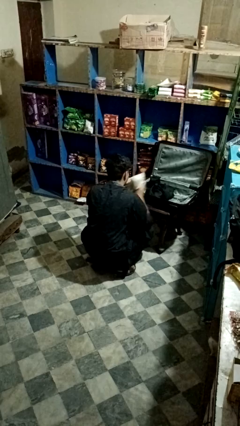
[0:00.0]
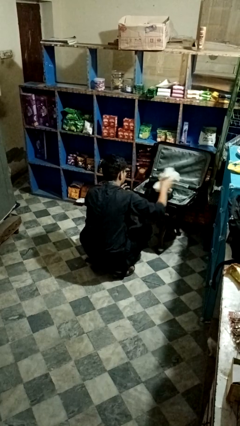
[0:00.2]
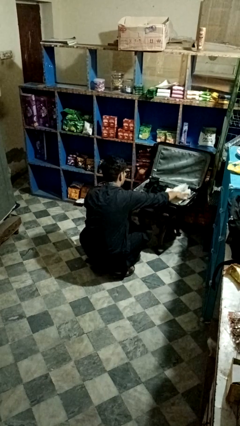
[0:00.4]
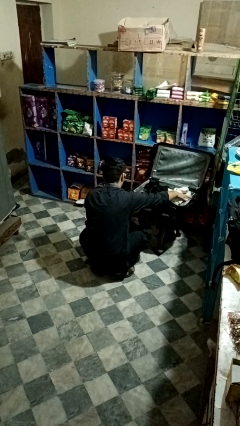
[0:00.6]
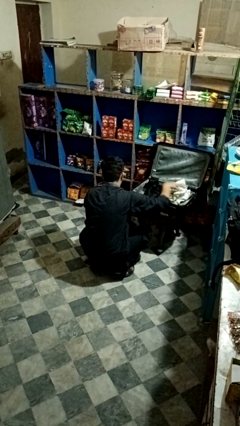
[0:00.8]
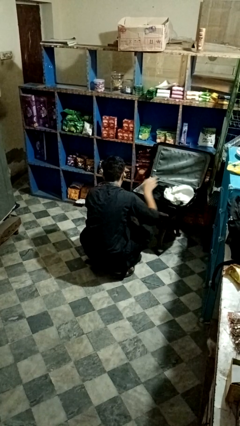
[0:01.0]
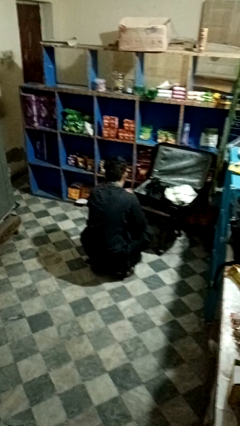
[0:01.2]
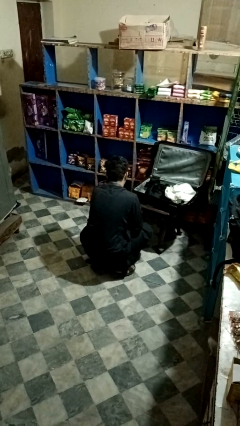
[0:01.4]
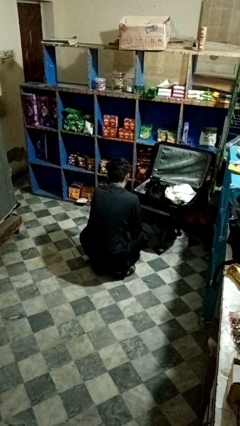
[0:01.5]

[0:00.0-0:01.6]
person loads clothes into suitcase

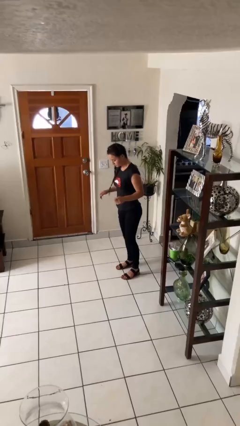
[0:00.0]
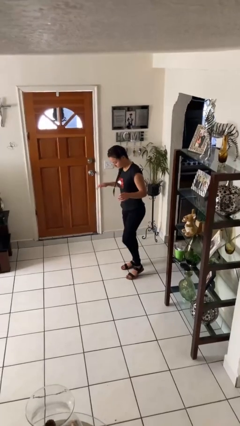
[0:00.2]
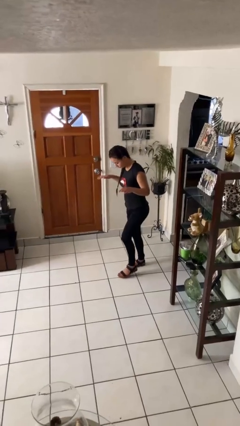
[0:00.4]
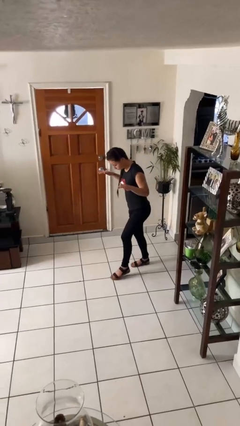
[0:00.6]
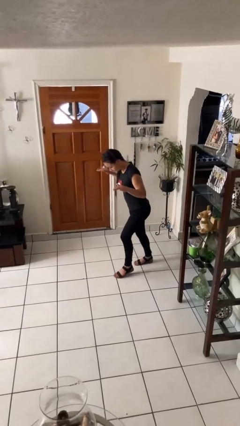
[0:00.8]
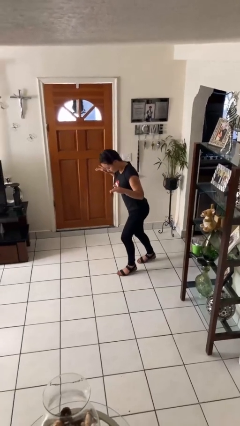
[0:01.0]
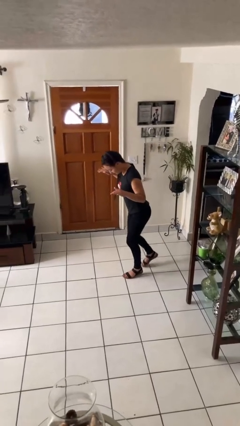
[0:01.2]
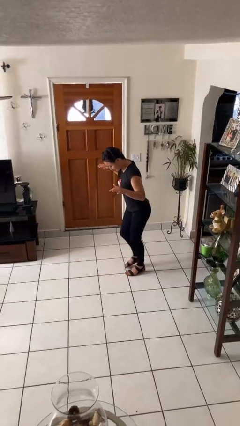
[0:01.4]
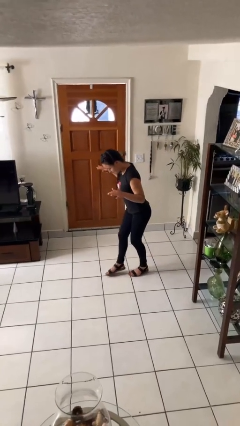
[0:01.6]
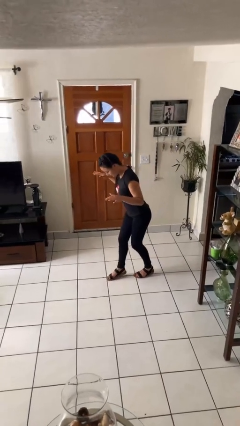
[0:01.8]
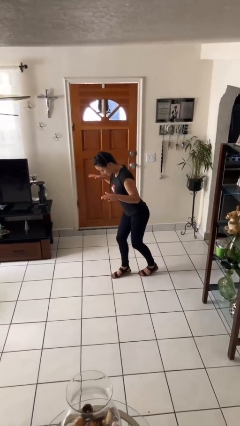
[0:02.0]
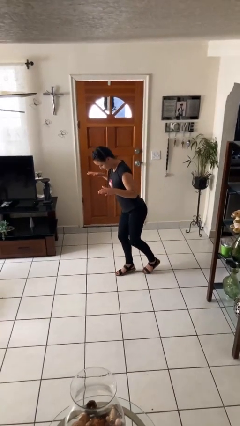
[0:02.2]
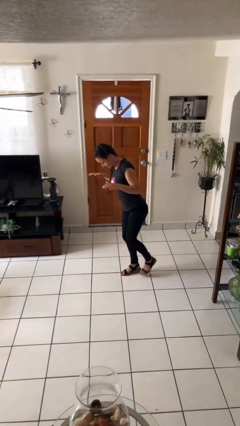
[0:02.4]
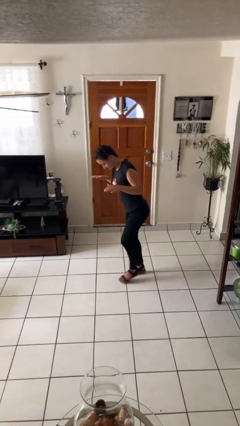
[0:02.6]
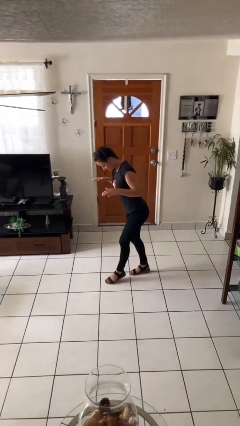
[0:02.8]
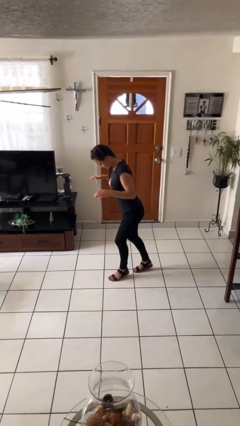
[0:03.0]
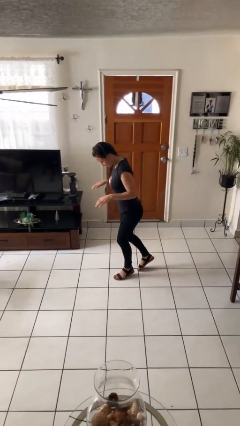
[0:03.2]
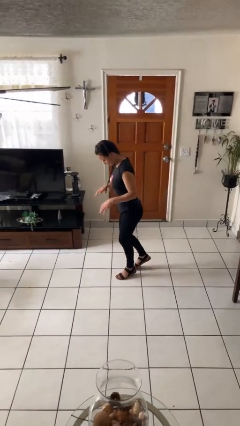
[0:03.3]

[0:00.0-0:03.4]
person walks tiptoe

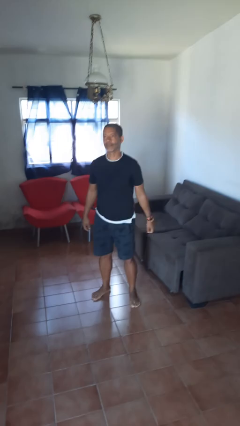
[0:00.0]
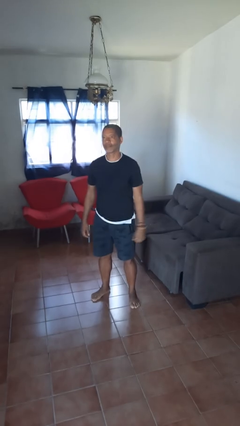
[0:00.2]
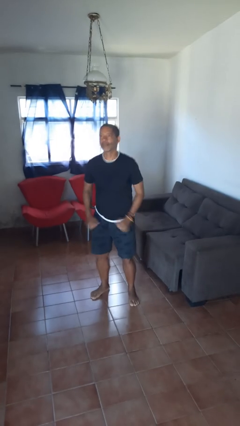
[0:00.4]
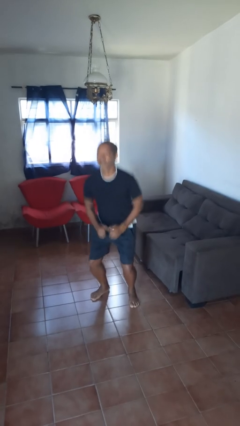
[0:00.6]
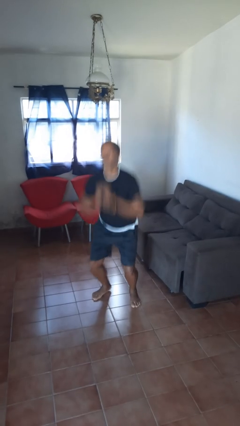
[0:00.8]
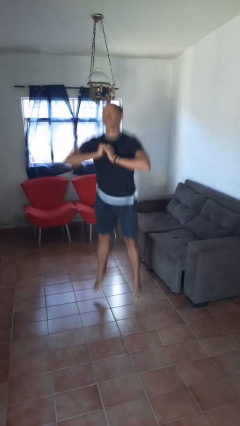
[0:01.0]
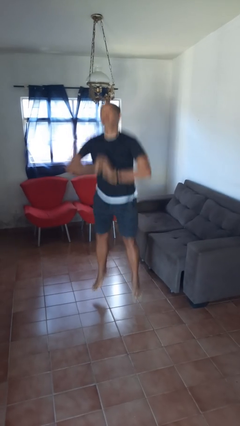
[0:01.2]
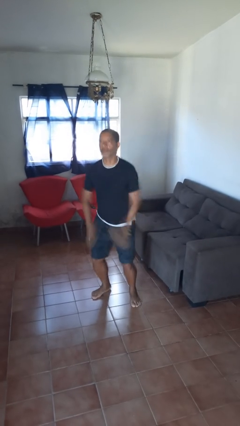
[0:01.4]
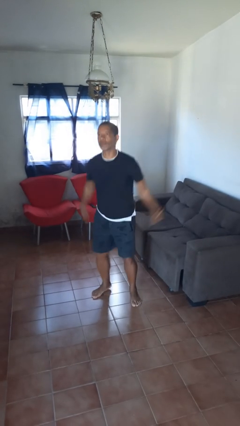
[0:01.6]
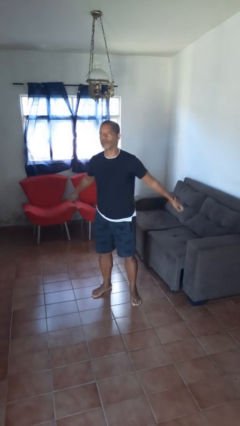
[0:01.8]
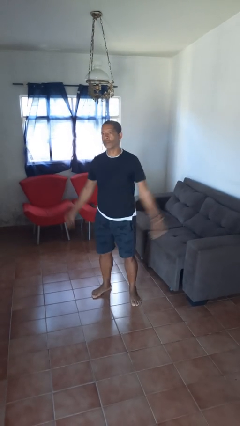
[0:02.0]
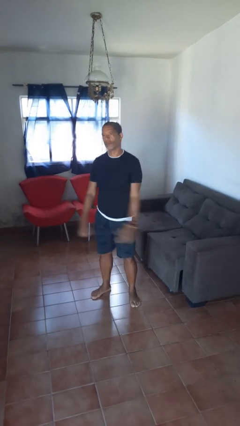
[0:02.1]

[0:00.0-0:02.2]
person jumps

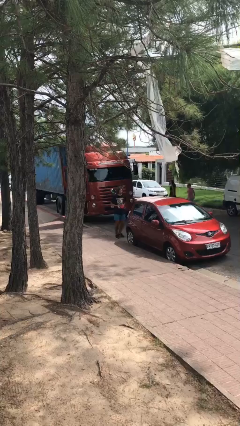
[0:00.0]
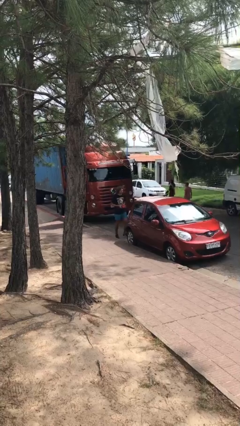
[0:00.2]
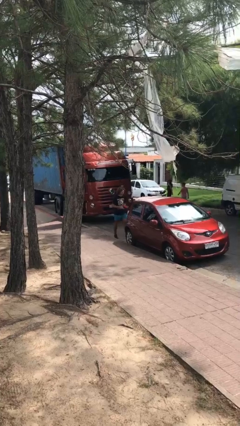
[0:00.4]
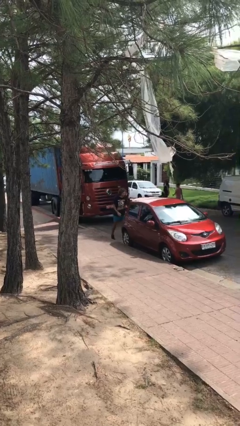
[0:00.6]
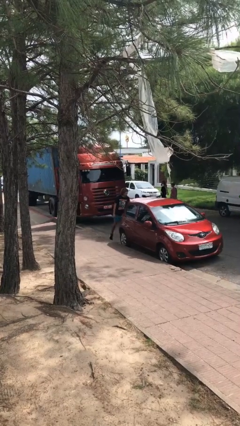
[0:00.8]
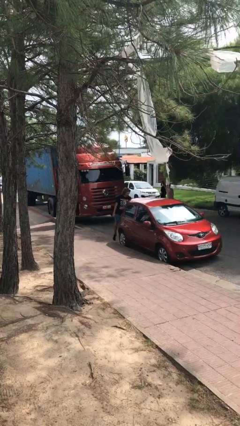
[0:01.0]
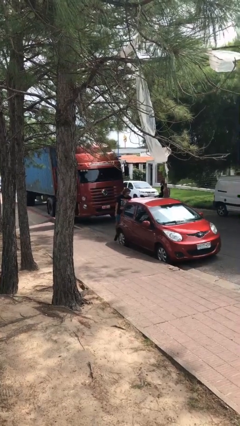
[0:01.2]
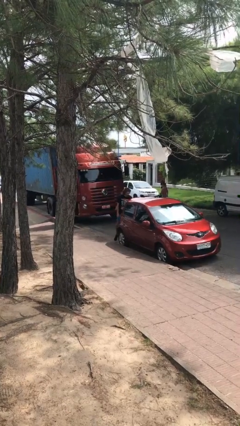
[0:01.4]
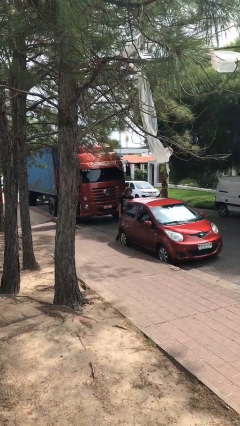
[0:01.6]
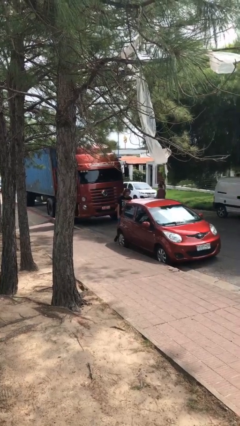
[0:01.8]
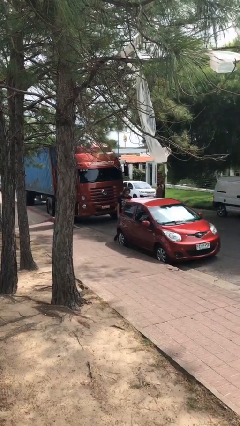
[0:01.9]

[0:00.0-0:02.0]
person loads car

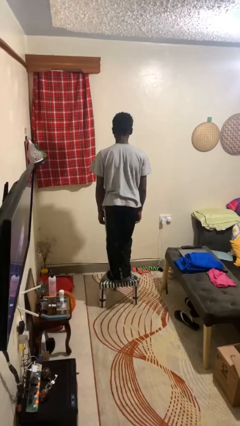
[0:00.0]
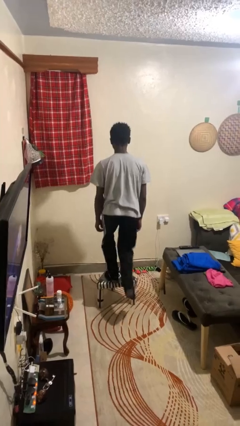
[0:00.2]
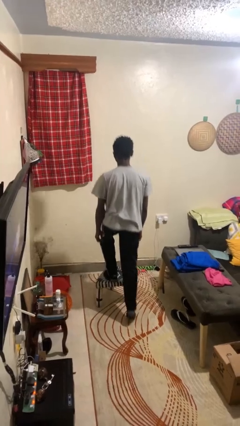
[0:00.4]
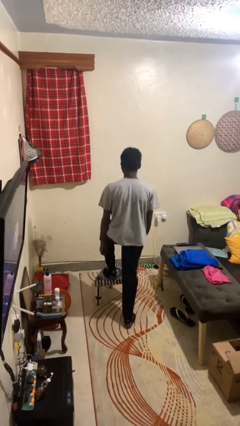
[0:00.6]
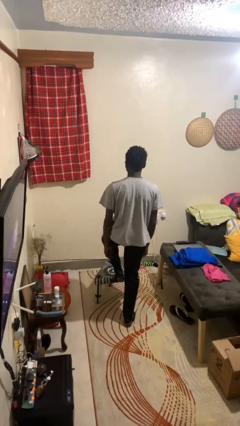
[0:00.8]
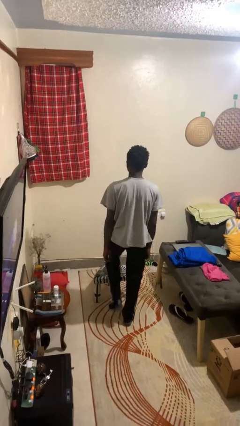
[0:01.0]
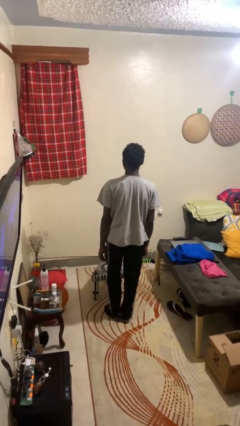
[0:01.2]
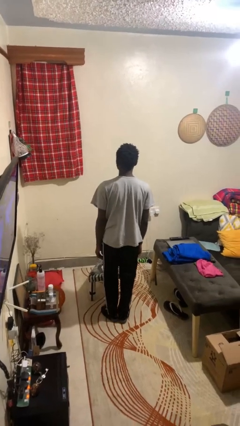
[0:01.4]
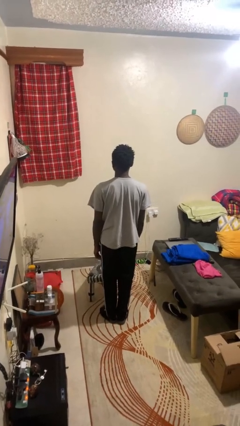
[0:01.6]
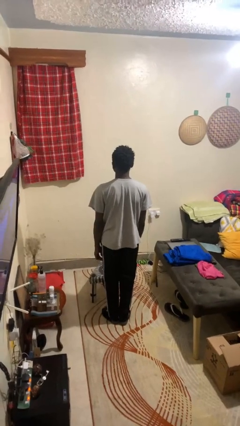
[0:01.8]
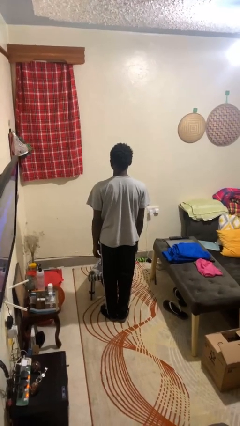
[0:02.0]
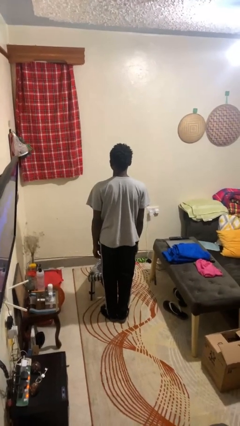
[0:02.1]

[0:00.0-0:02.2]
person climbs off chair

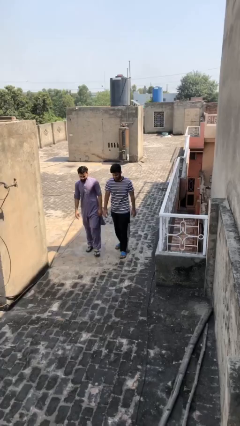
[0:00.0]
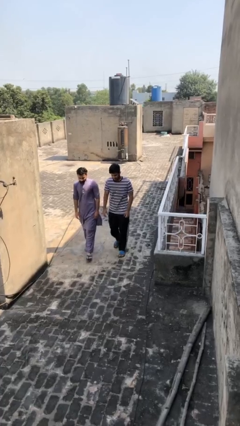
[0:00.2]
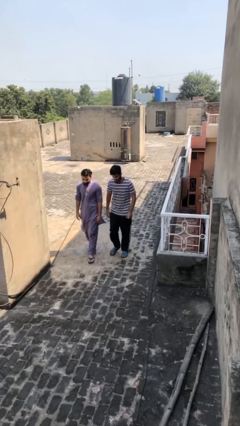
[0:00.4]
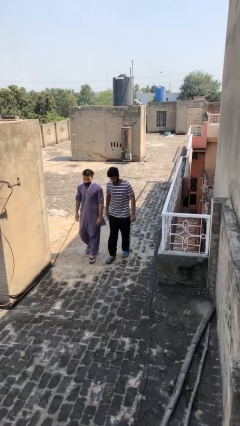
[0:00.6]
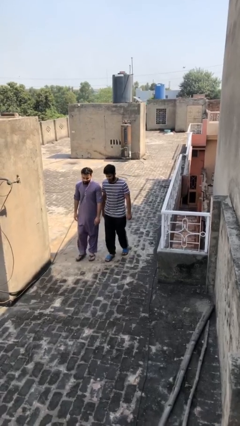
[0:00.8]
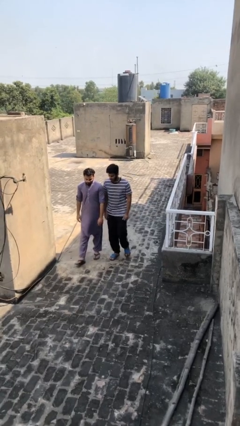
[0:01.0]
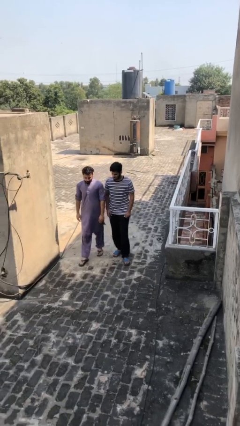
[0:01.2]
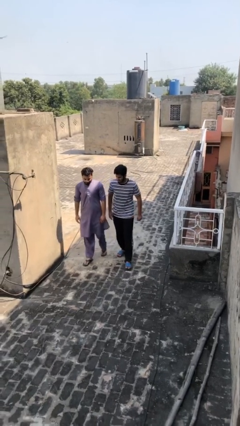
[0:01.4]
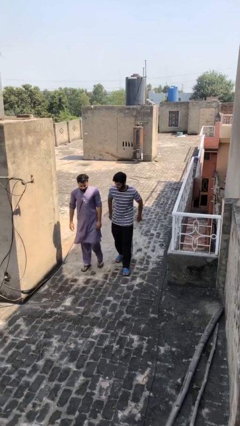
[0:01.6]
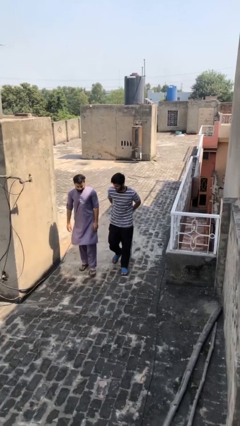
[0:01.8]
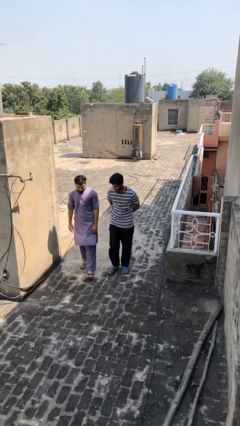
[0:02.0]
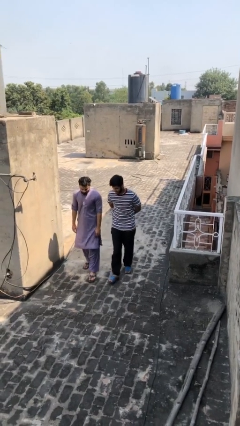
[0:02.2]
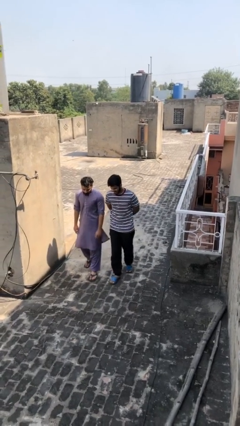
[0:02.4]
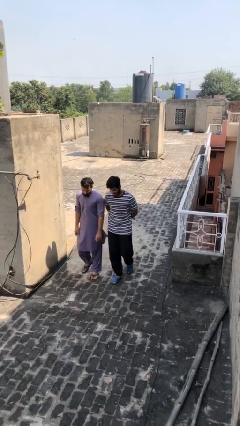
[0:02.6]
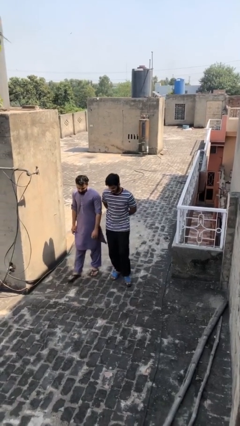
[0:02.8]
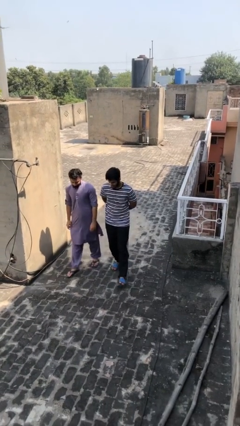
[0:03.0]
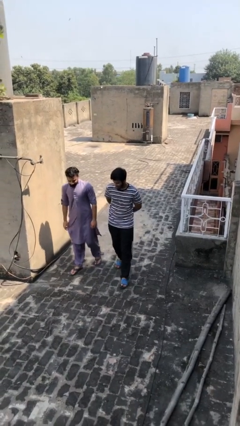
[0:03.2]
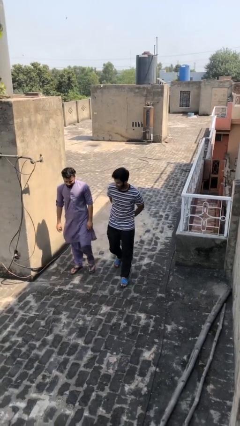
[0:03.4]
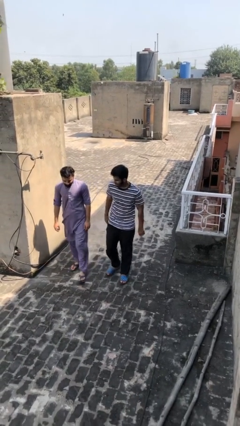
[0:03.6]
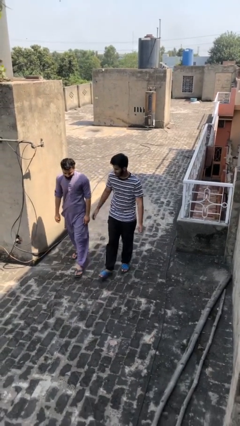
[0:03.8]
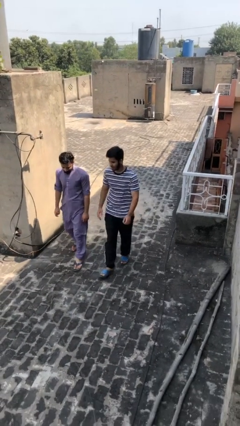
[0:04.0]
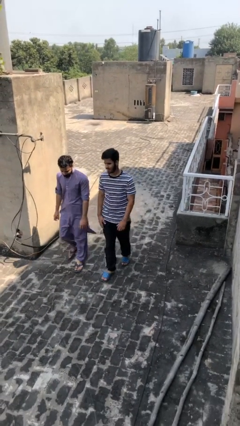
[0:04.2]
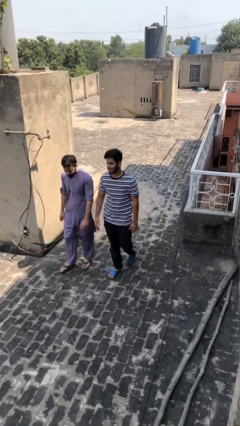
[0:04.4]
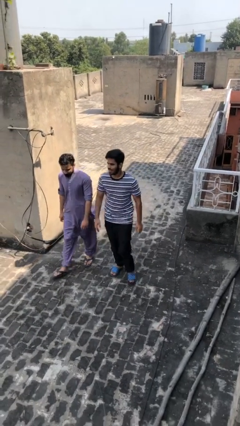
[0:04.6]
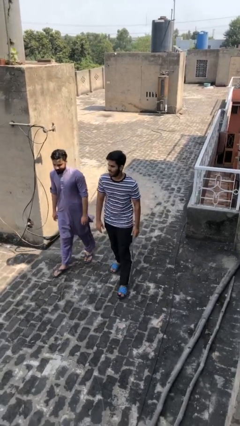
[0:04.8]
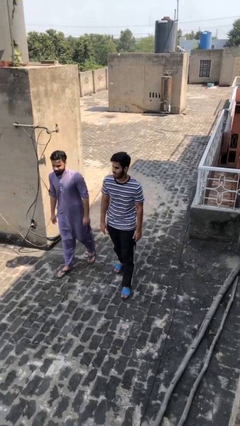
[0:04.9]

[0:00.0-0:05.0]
person talks to person

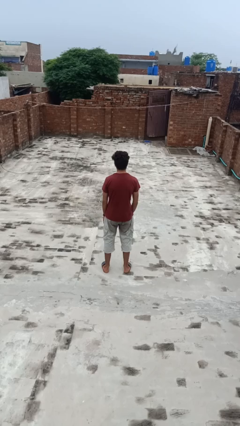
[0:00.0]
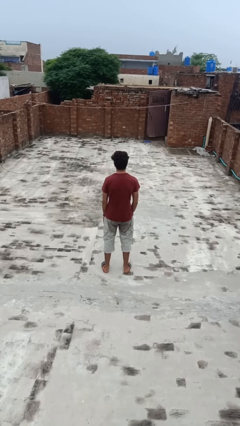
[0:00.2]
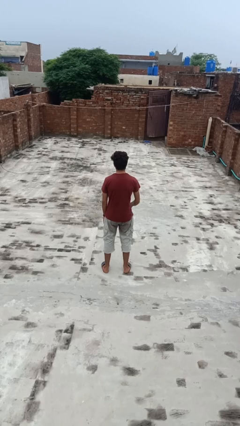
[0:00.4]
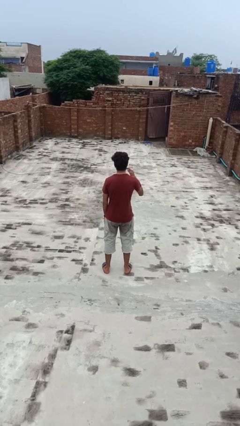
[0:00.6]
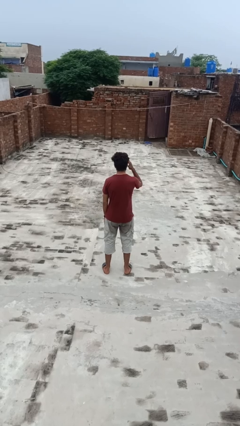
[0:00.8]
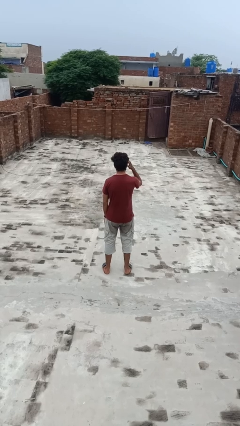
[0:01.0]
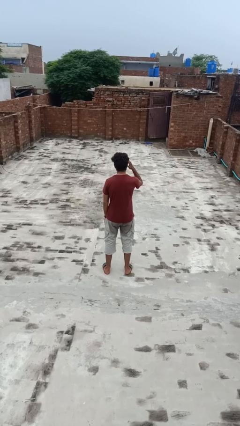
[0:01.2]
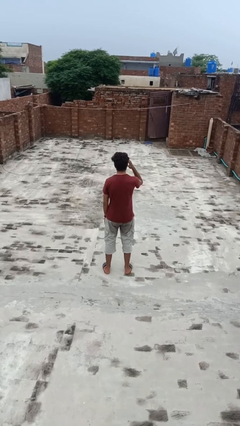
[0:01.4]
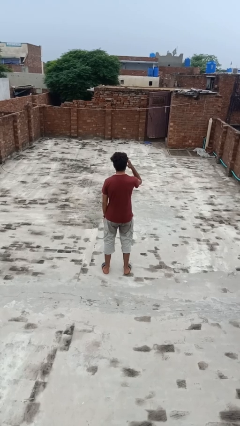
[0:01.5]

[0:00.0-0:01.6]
person salutes
